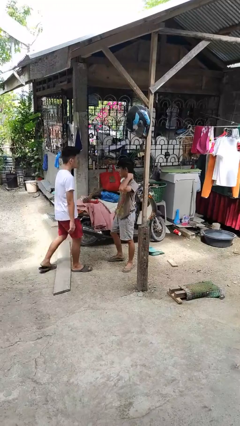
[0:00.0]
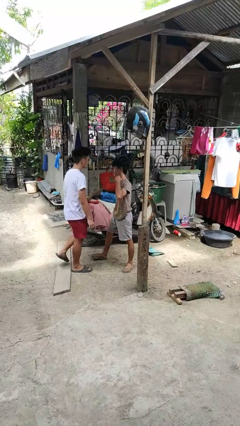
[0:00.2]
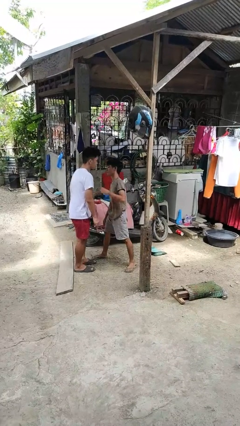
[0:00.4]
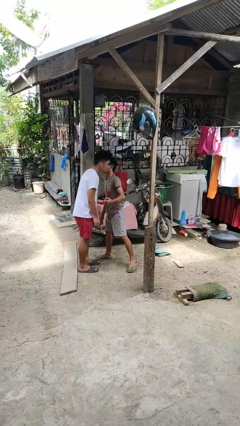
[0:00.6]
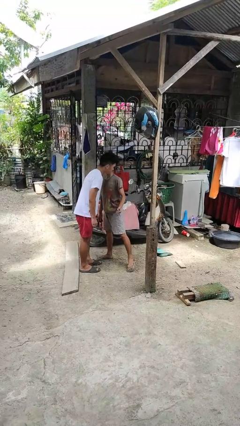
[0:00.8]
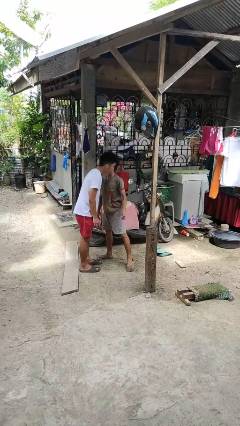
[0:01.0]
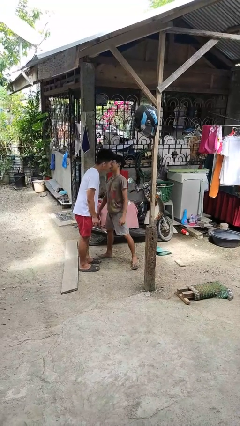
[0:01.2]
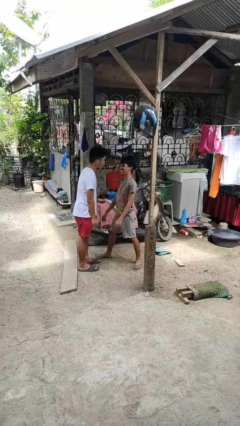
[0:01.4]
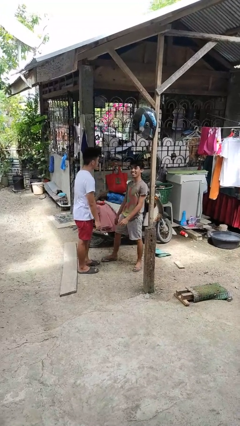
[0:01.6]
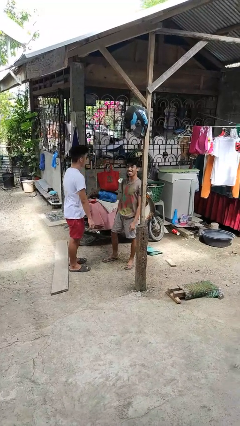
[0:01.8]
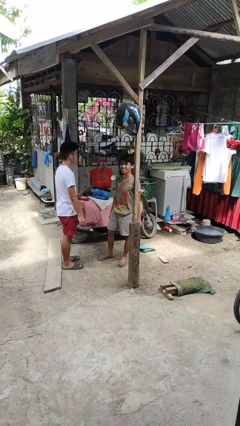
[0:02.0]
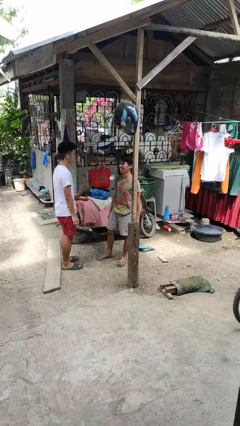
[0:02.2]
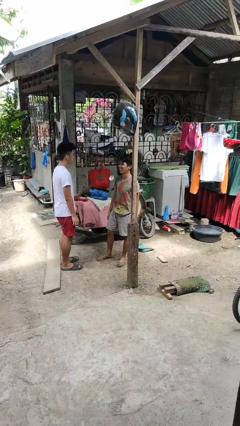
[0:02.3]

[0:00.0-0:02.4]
person kisses cheek of person

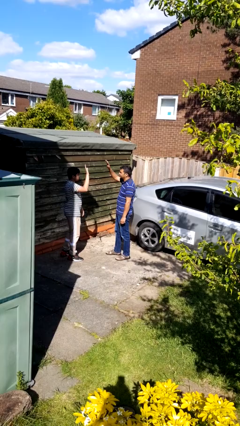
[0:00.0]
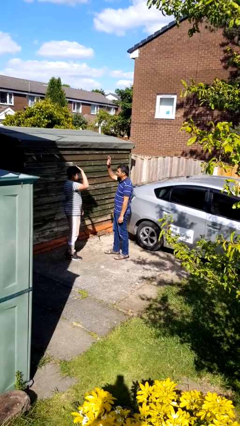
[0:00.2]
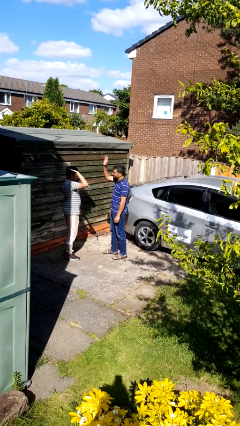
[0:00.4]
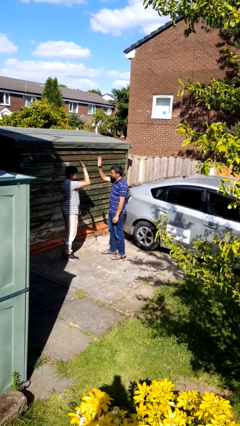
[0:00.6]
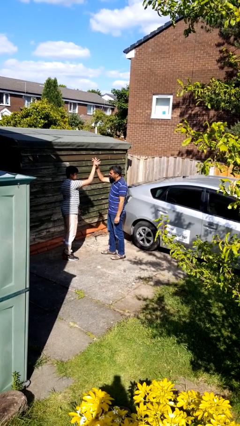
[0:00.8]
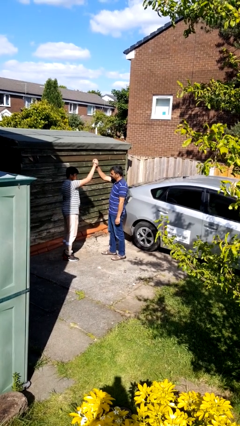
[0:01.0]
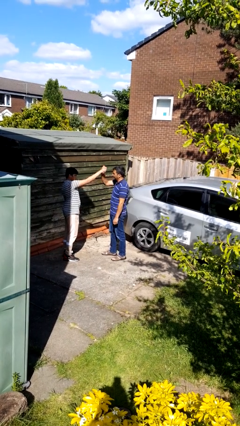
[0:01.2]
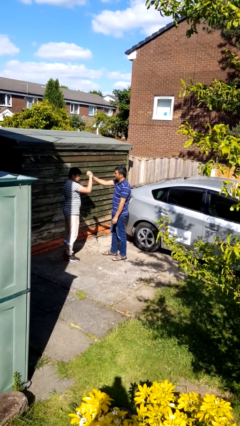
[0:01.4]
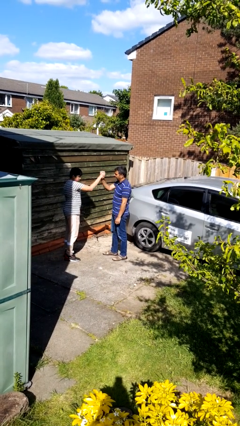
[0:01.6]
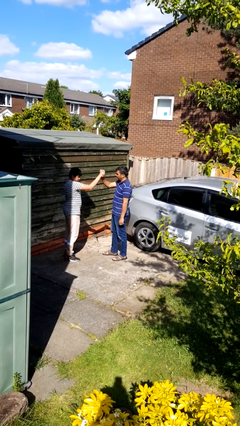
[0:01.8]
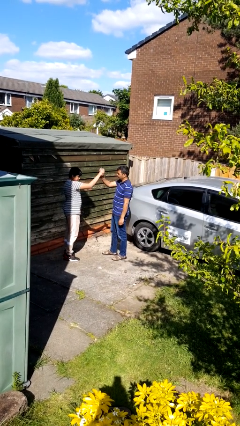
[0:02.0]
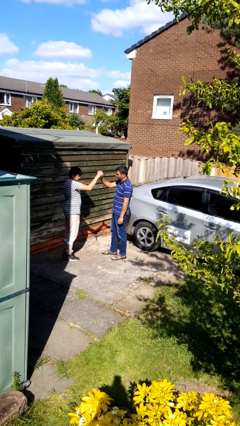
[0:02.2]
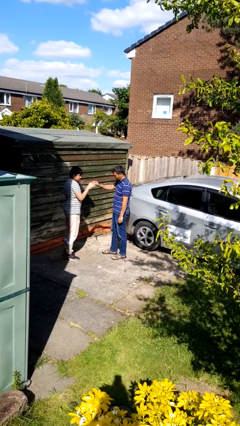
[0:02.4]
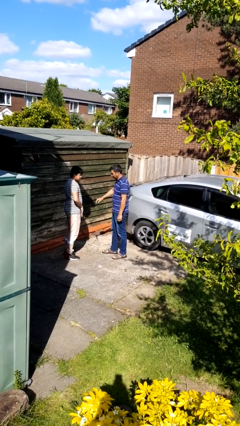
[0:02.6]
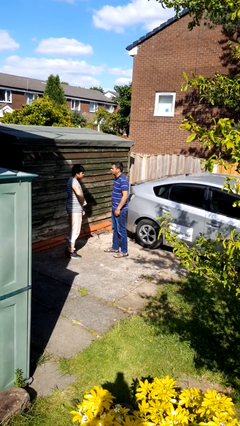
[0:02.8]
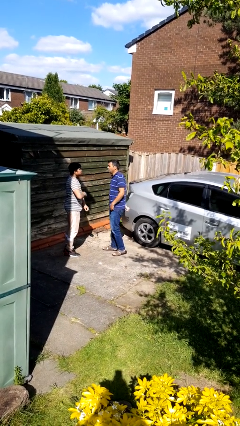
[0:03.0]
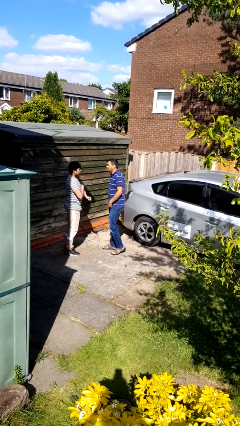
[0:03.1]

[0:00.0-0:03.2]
person highfives hand

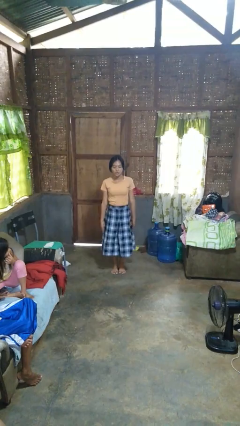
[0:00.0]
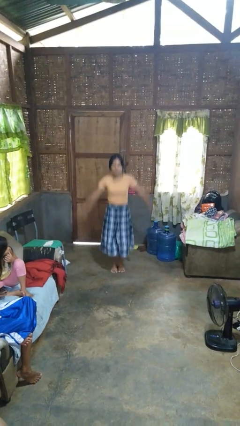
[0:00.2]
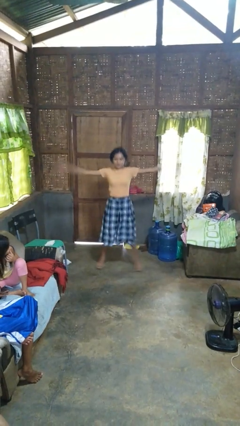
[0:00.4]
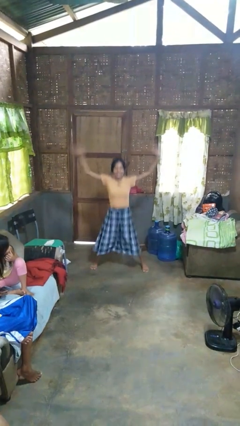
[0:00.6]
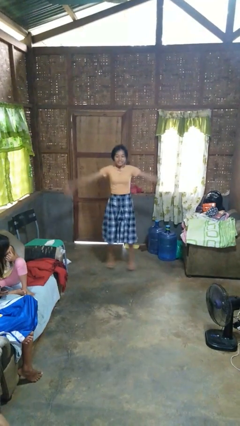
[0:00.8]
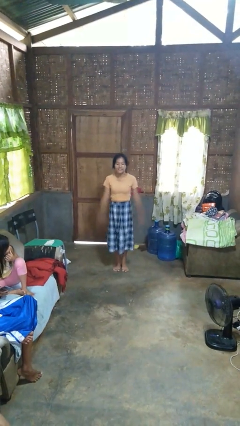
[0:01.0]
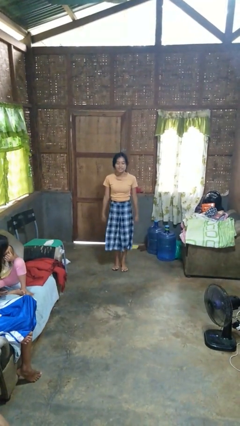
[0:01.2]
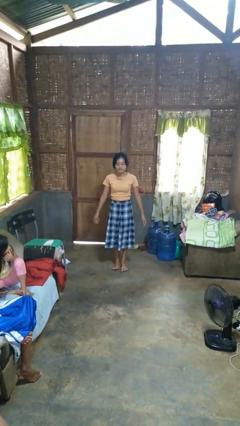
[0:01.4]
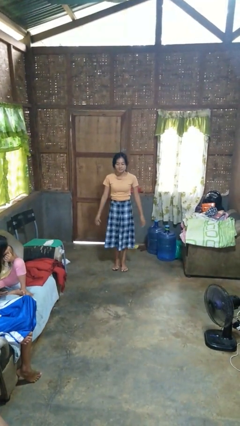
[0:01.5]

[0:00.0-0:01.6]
person exercises with jumping jacks

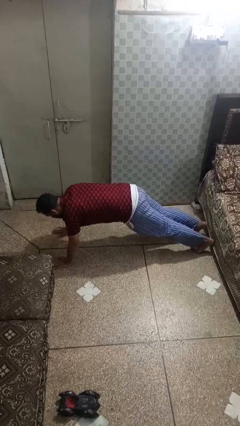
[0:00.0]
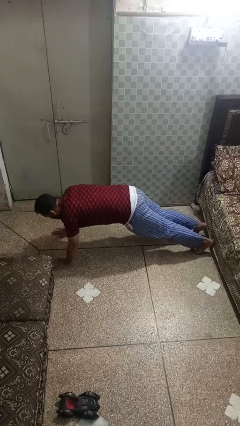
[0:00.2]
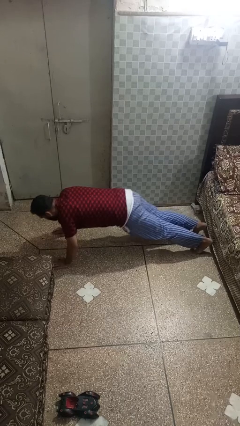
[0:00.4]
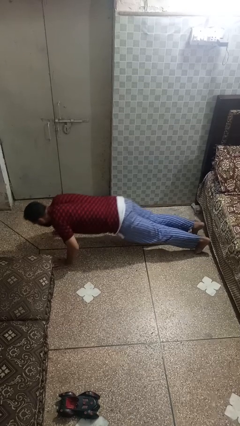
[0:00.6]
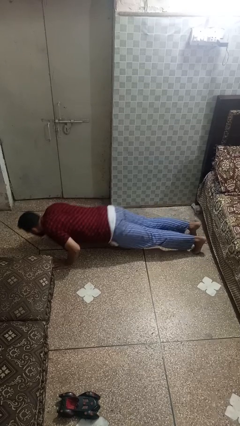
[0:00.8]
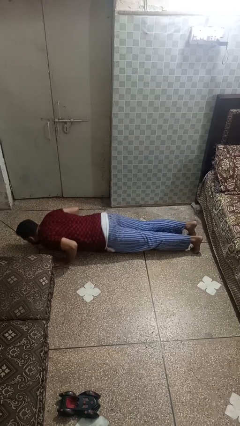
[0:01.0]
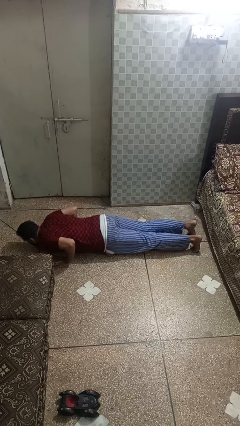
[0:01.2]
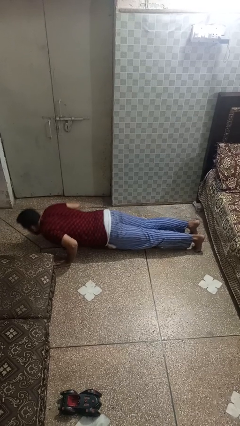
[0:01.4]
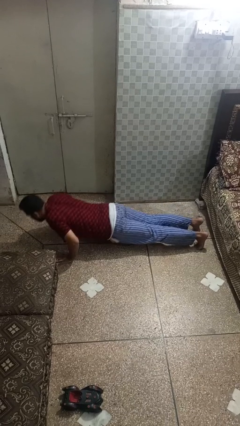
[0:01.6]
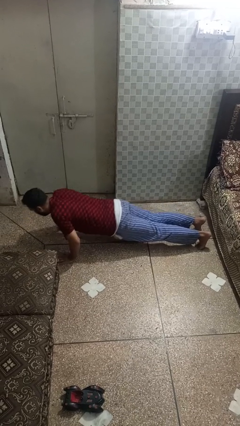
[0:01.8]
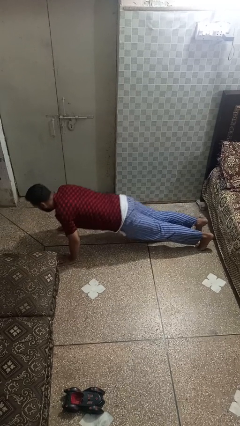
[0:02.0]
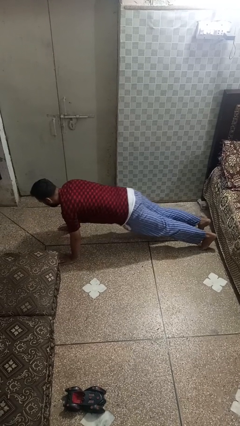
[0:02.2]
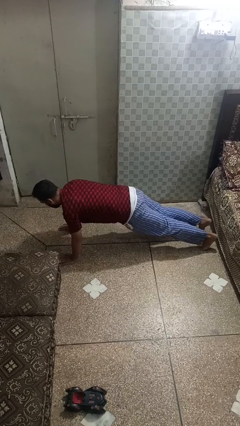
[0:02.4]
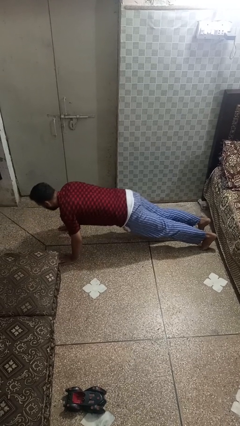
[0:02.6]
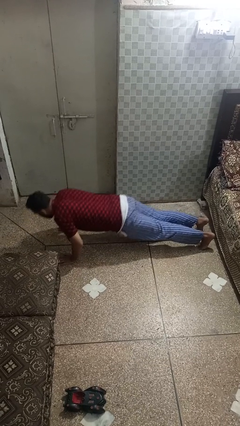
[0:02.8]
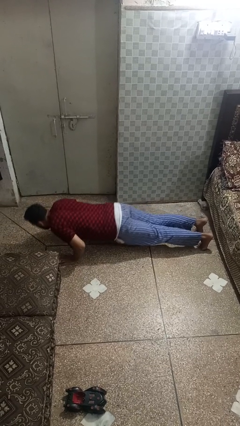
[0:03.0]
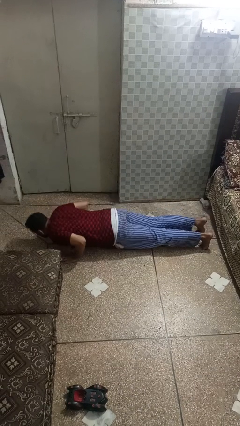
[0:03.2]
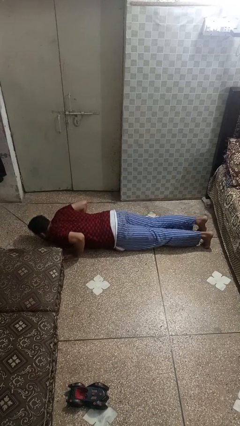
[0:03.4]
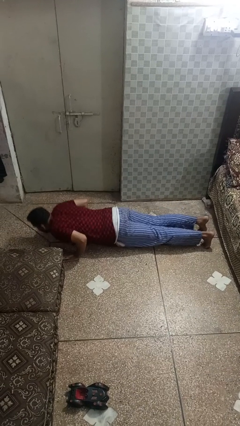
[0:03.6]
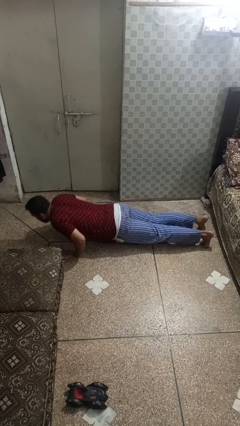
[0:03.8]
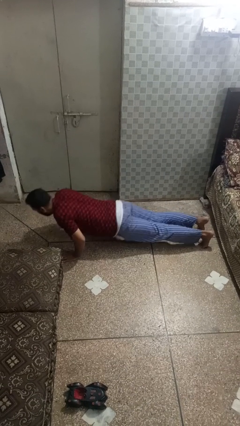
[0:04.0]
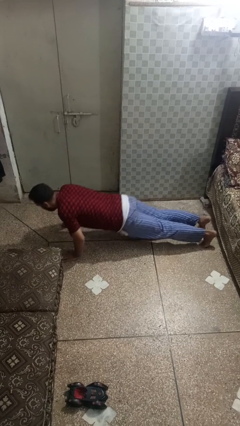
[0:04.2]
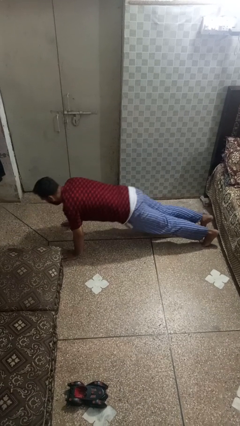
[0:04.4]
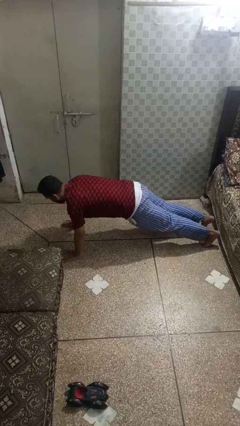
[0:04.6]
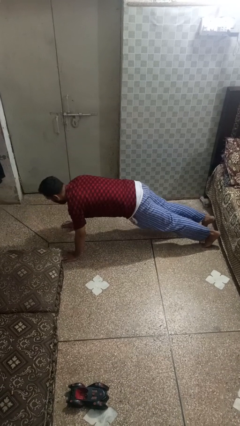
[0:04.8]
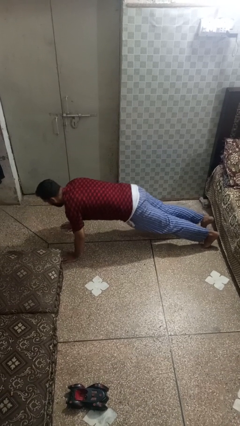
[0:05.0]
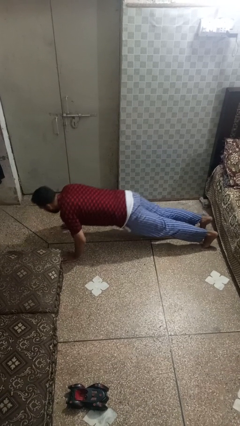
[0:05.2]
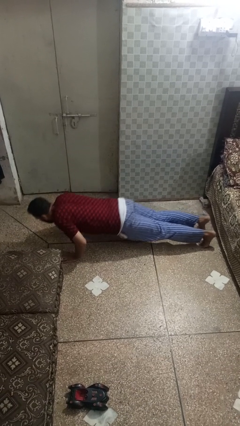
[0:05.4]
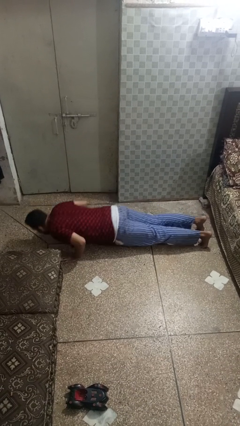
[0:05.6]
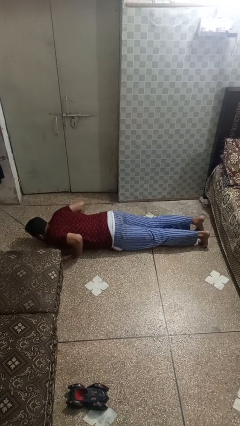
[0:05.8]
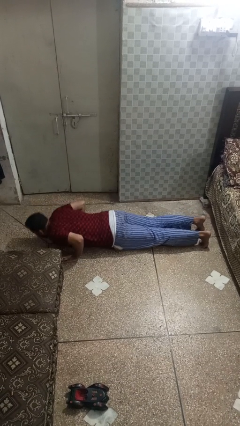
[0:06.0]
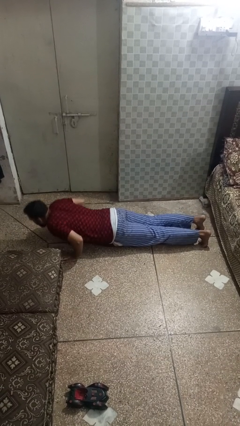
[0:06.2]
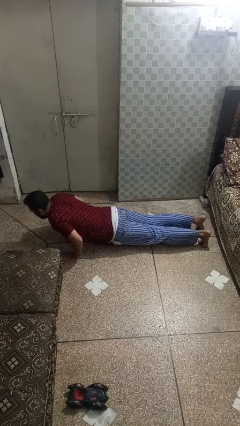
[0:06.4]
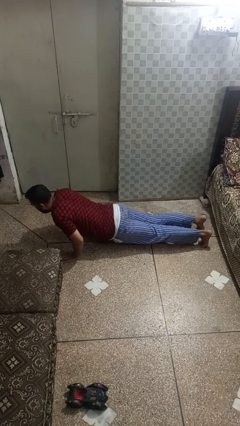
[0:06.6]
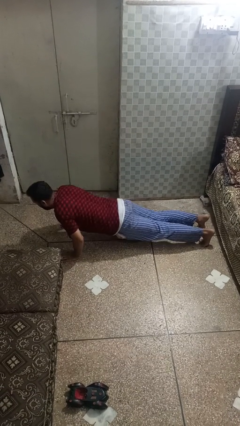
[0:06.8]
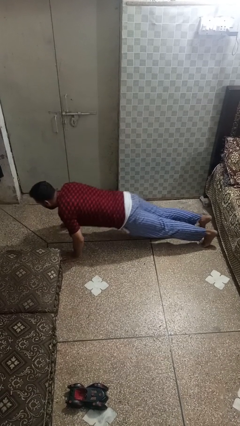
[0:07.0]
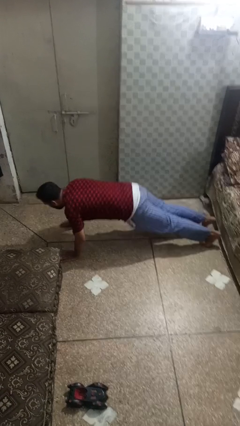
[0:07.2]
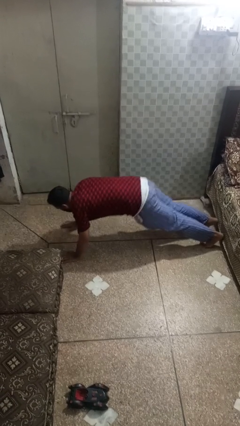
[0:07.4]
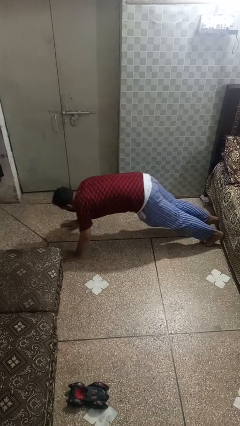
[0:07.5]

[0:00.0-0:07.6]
person exercises with pushup

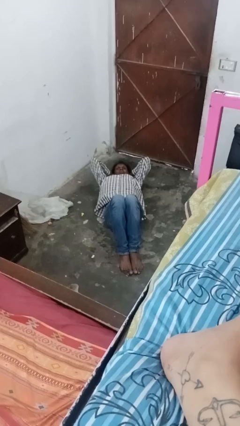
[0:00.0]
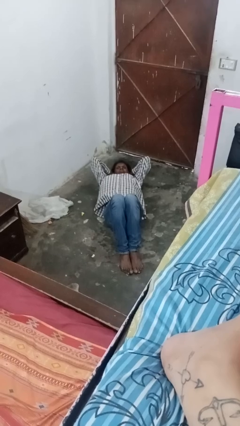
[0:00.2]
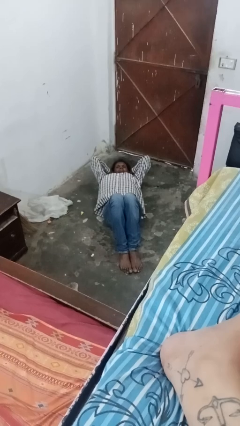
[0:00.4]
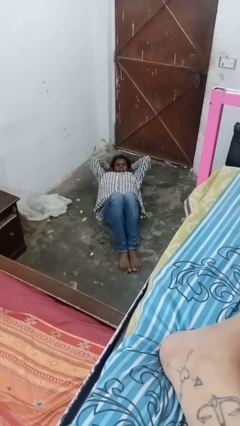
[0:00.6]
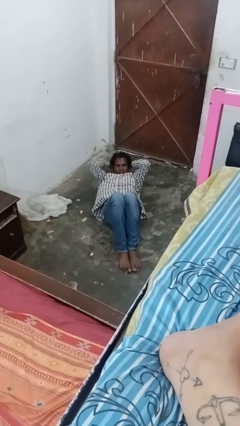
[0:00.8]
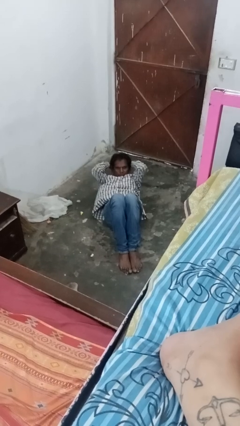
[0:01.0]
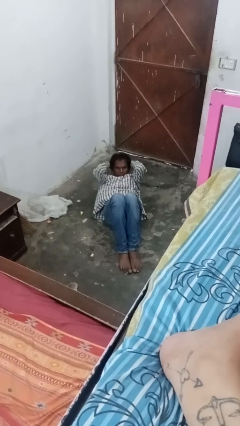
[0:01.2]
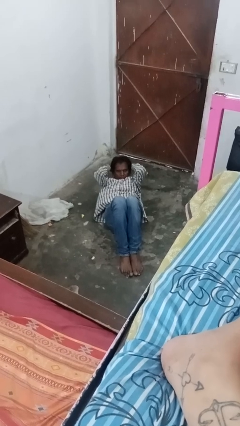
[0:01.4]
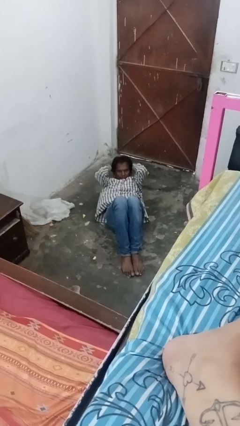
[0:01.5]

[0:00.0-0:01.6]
person exercises with situp

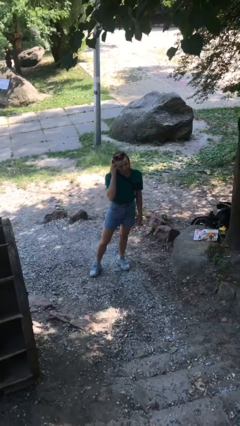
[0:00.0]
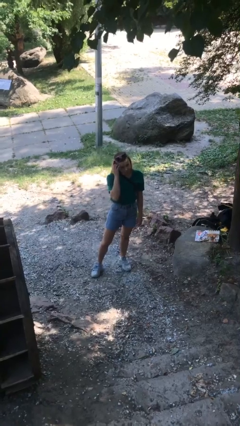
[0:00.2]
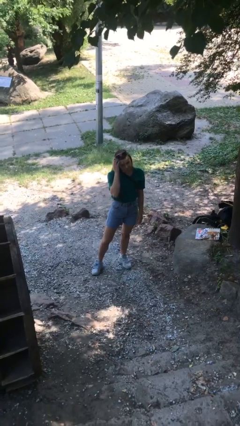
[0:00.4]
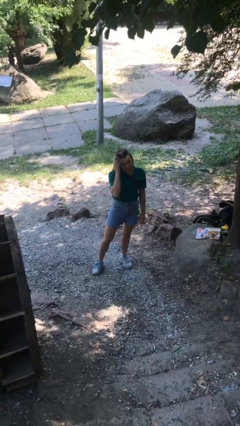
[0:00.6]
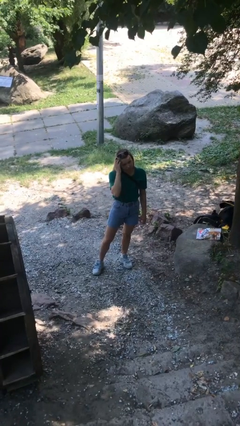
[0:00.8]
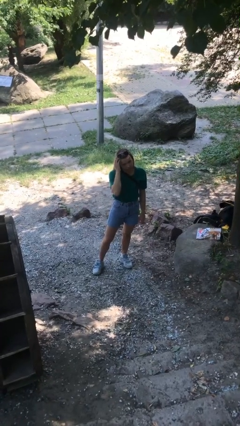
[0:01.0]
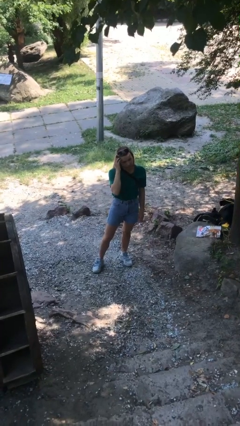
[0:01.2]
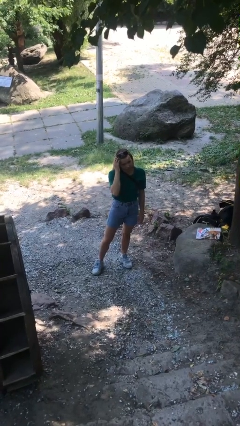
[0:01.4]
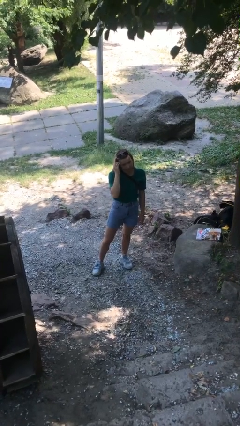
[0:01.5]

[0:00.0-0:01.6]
person scratches face
